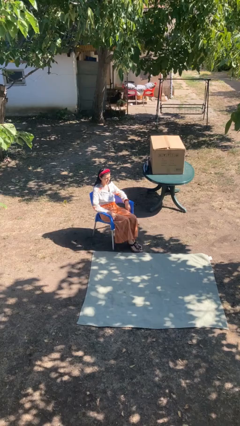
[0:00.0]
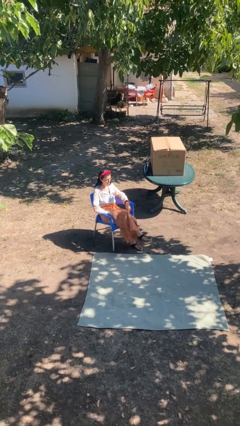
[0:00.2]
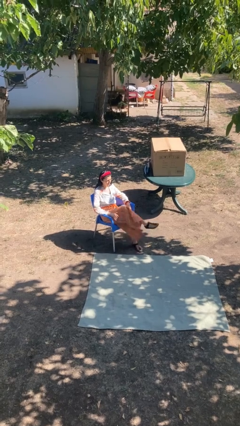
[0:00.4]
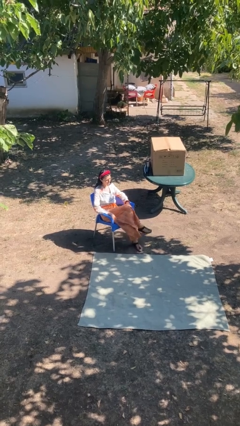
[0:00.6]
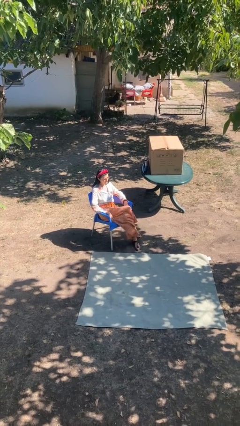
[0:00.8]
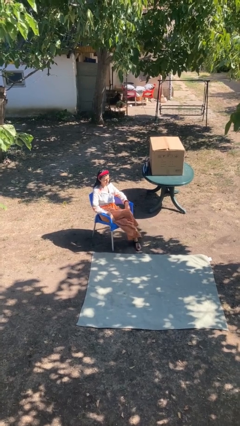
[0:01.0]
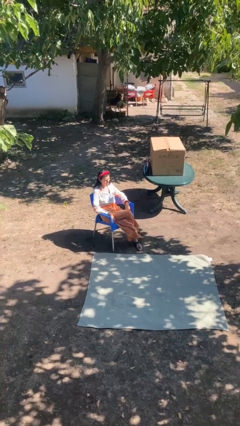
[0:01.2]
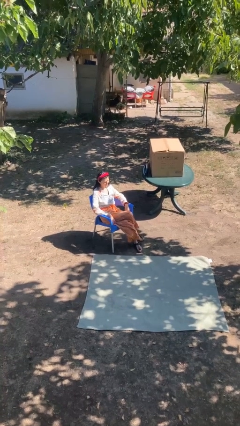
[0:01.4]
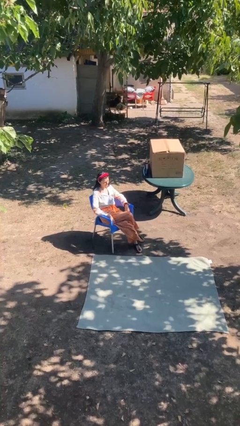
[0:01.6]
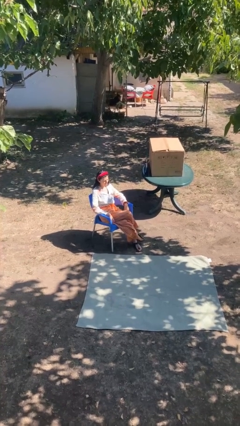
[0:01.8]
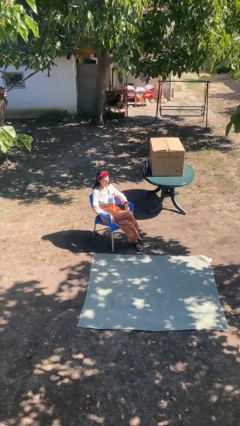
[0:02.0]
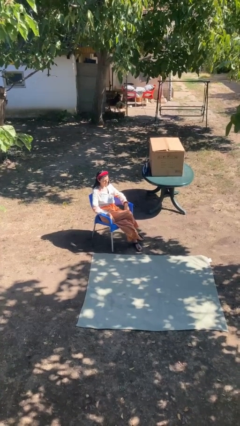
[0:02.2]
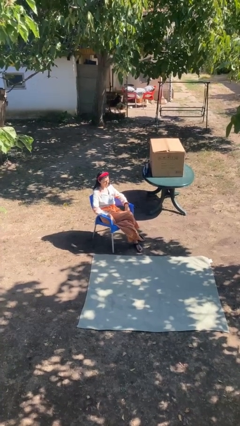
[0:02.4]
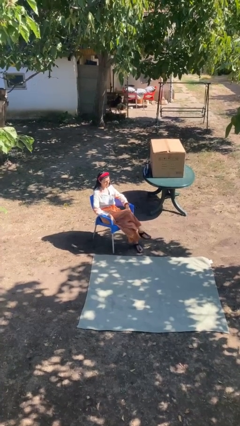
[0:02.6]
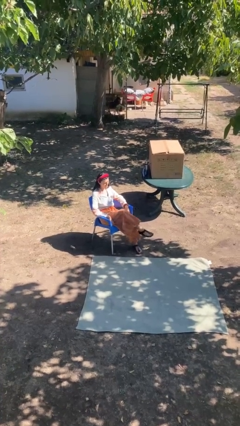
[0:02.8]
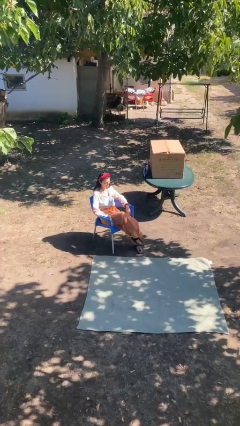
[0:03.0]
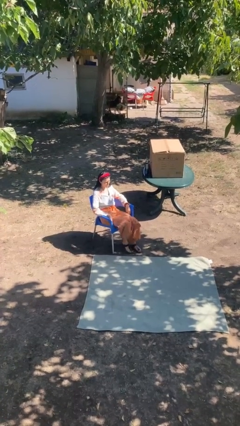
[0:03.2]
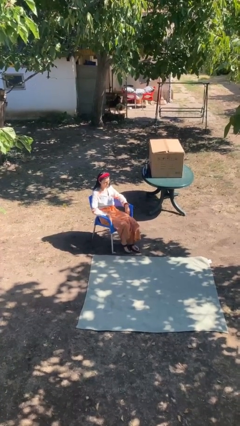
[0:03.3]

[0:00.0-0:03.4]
person crosses legs

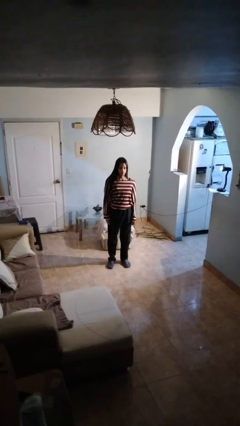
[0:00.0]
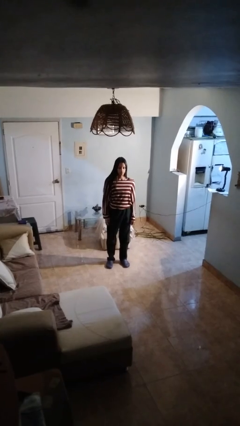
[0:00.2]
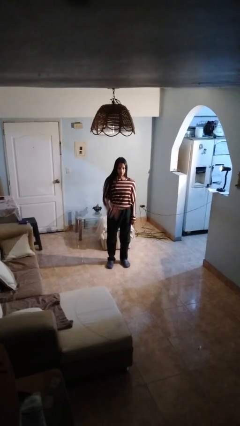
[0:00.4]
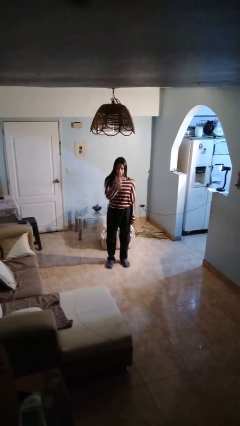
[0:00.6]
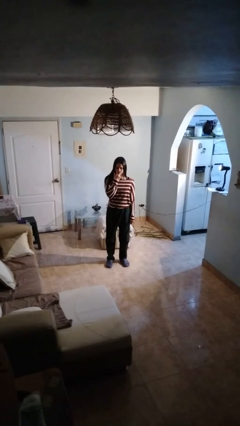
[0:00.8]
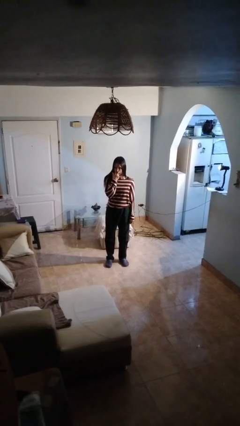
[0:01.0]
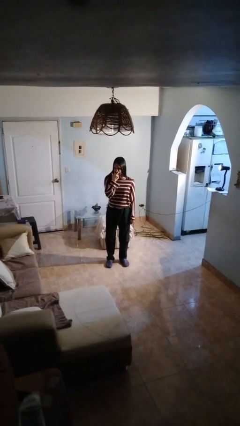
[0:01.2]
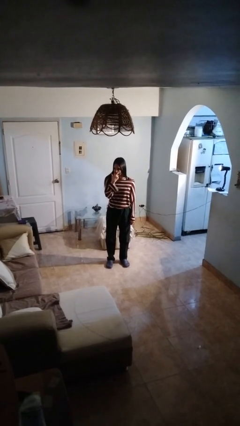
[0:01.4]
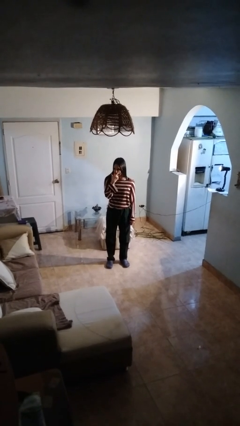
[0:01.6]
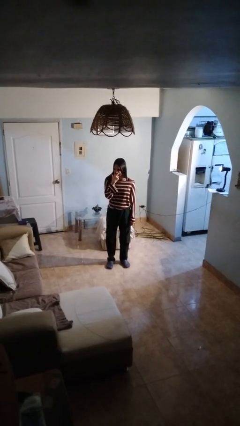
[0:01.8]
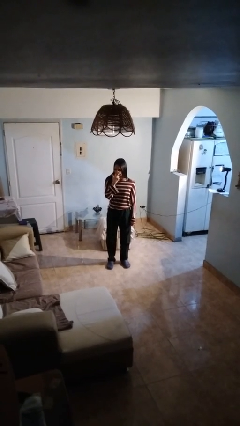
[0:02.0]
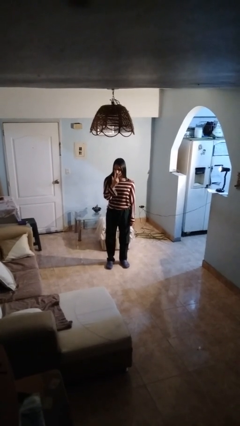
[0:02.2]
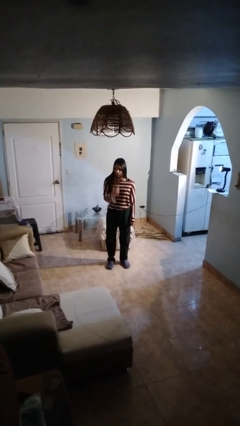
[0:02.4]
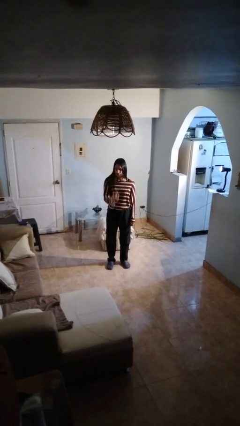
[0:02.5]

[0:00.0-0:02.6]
person gestures watch closely

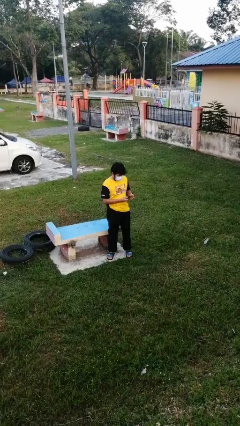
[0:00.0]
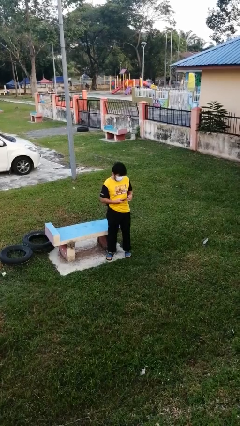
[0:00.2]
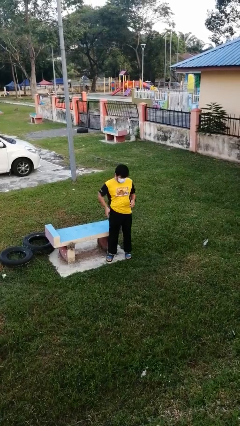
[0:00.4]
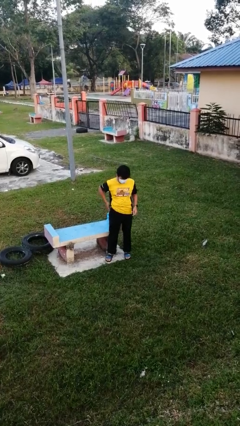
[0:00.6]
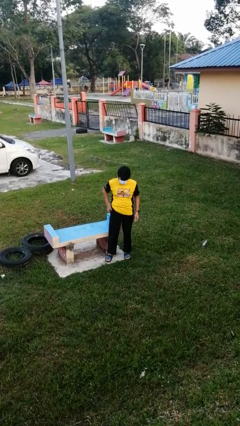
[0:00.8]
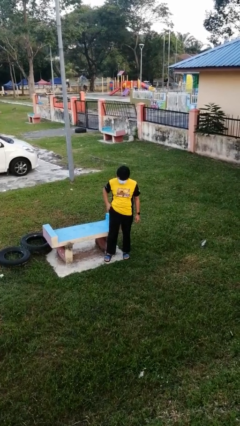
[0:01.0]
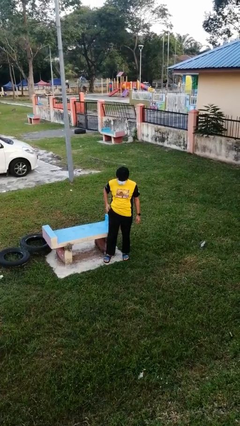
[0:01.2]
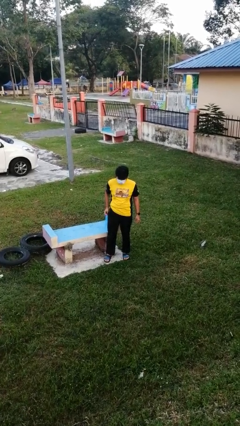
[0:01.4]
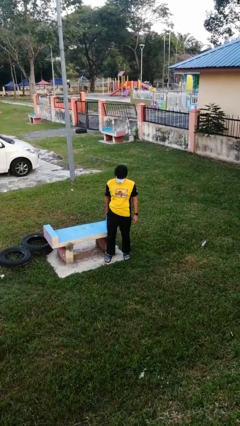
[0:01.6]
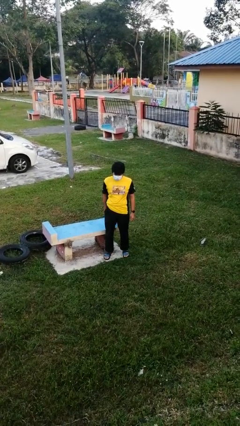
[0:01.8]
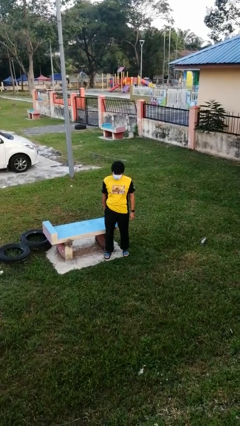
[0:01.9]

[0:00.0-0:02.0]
person puts phone into pocket

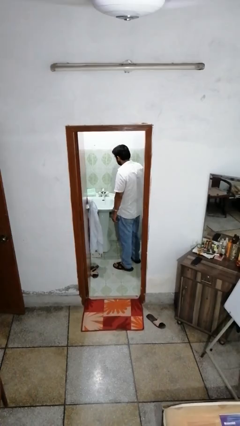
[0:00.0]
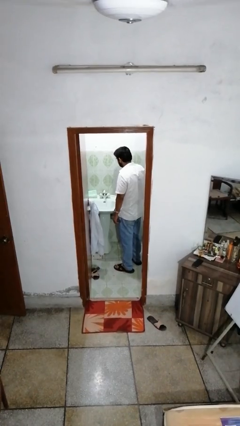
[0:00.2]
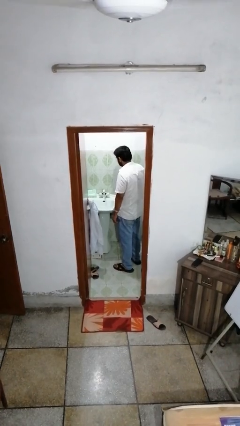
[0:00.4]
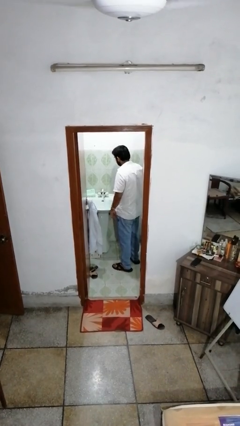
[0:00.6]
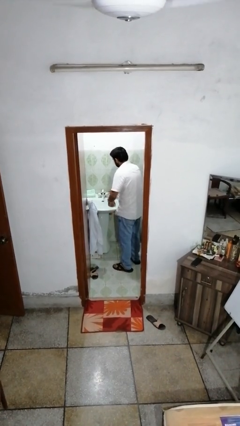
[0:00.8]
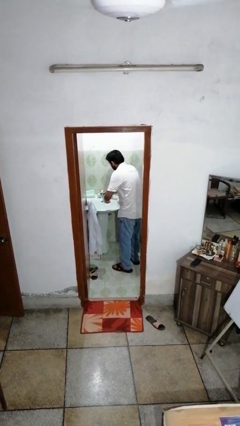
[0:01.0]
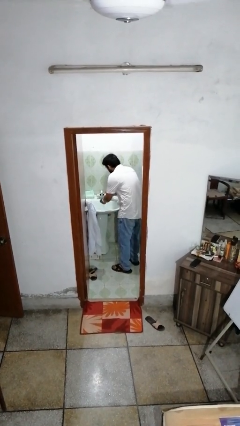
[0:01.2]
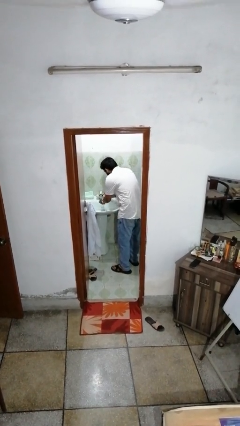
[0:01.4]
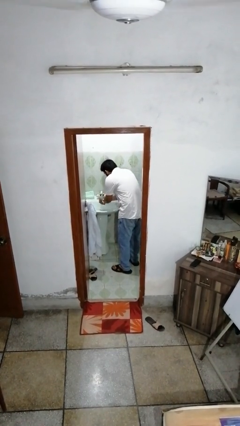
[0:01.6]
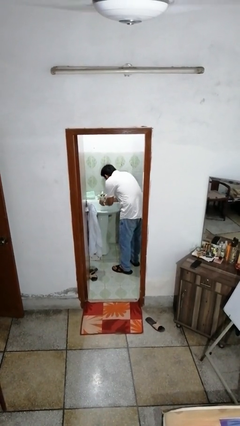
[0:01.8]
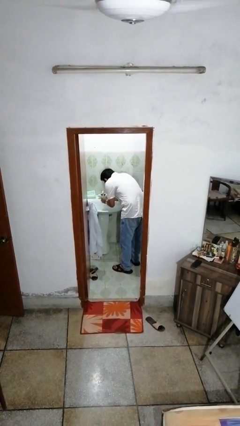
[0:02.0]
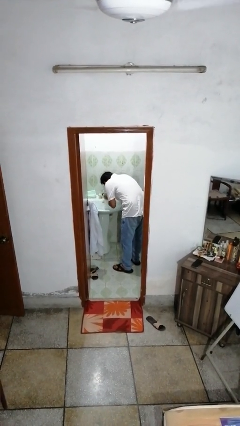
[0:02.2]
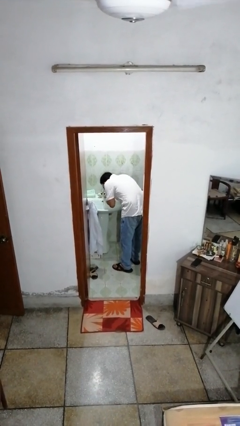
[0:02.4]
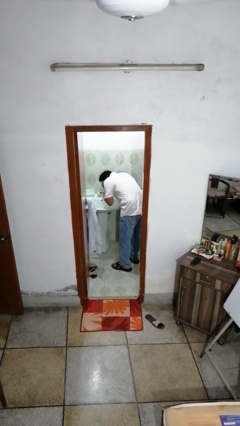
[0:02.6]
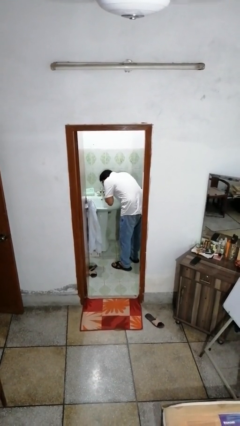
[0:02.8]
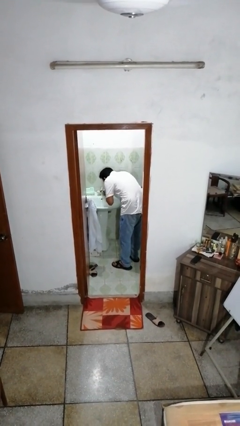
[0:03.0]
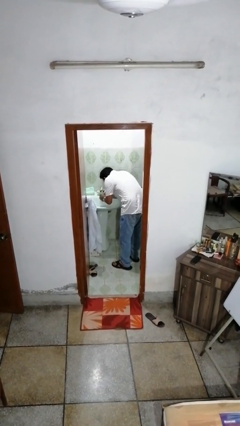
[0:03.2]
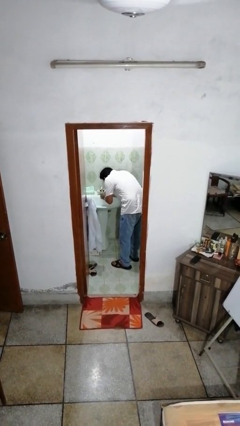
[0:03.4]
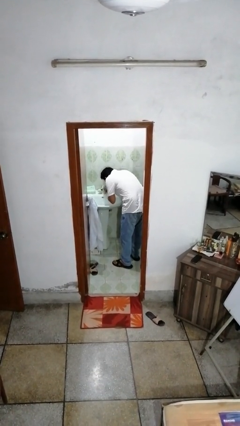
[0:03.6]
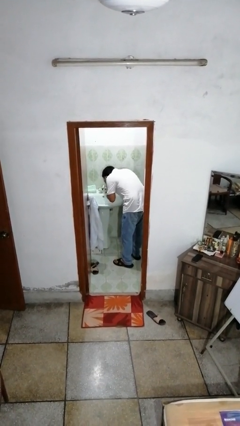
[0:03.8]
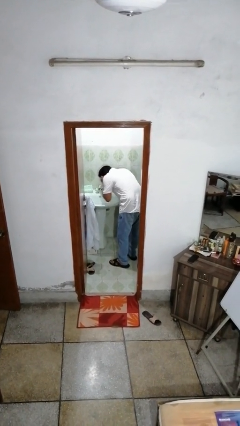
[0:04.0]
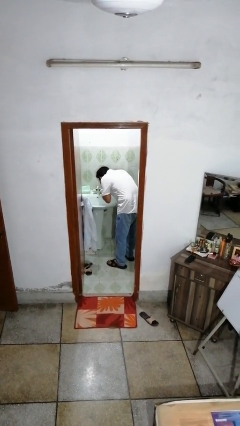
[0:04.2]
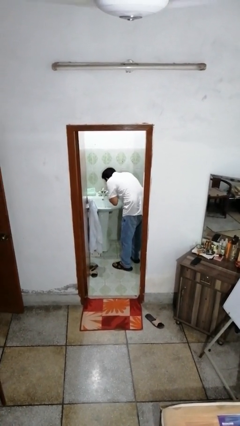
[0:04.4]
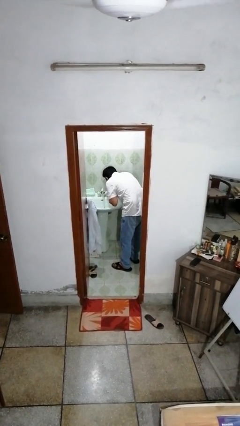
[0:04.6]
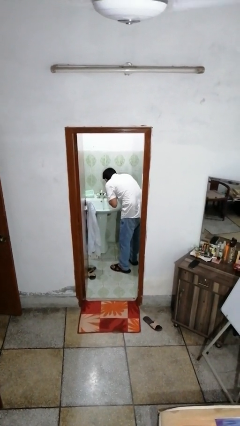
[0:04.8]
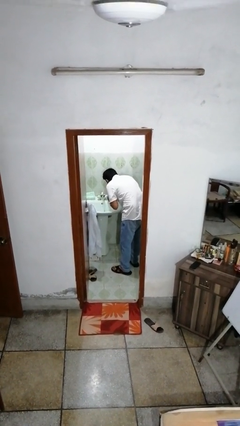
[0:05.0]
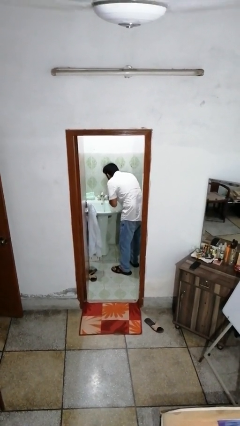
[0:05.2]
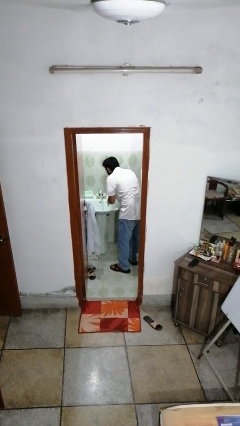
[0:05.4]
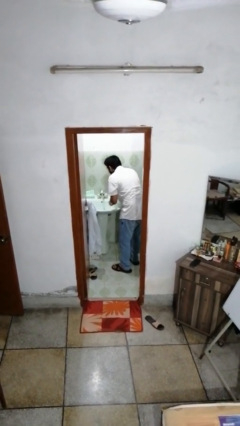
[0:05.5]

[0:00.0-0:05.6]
person washes face

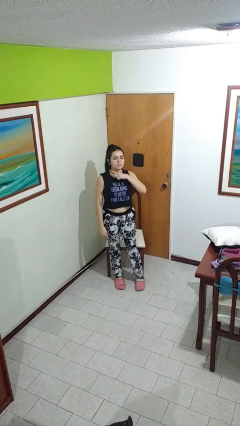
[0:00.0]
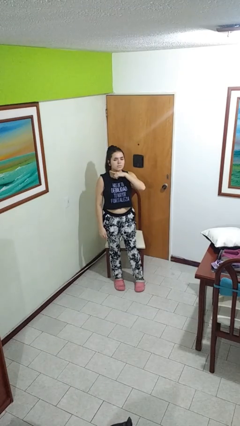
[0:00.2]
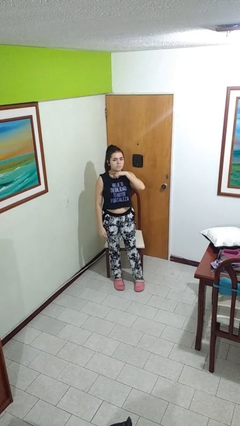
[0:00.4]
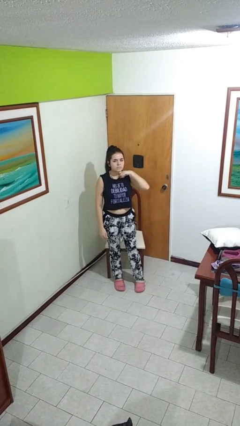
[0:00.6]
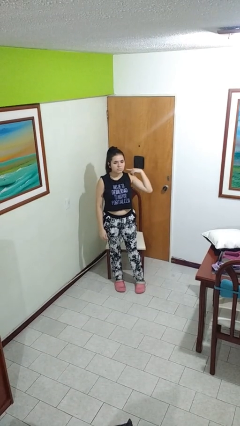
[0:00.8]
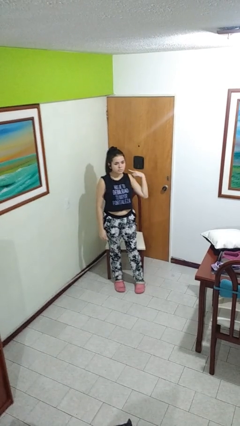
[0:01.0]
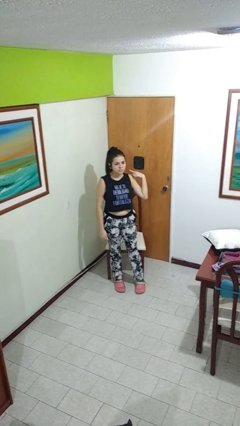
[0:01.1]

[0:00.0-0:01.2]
person gestures cut

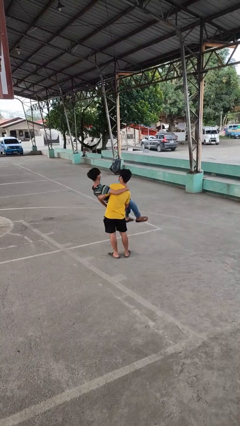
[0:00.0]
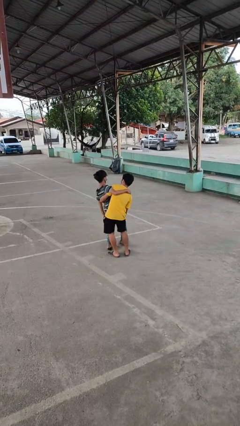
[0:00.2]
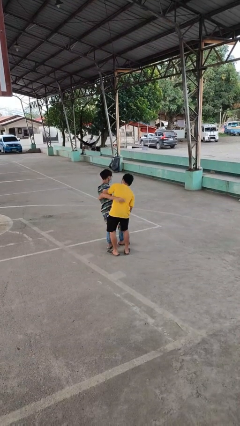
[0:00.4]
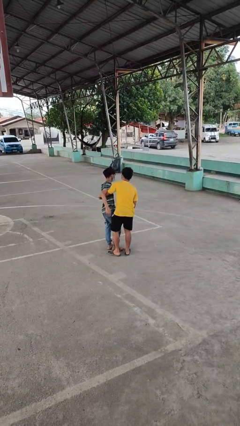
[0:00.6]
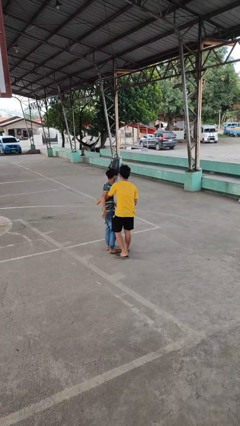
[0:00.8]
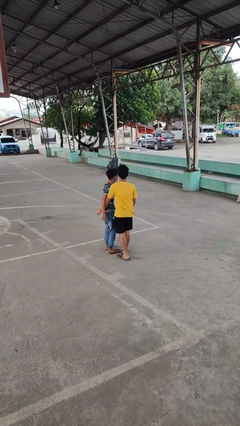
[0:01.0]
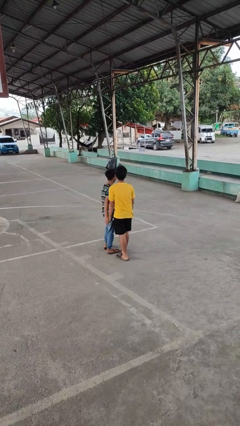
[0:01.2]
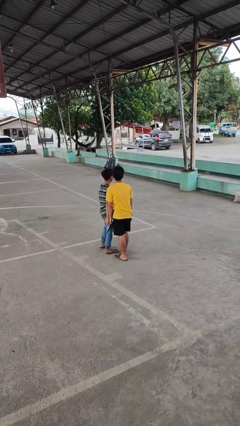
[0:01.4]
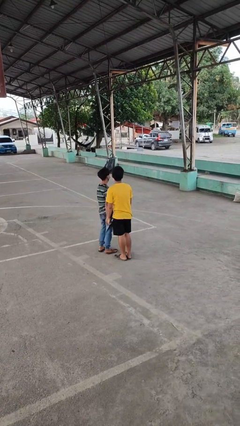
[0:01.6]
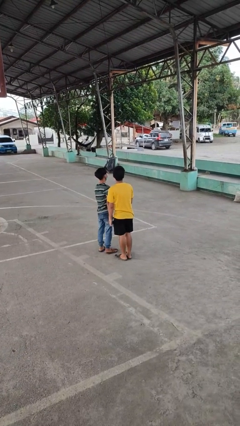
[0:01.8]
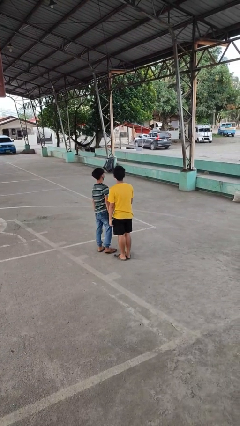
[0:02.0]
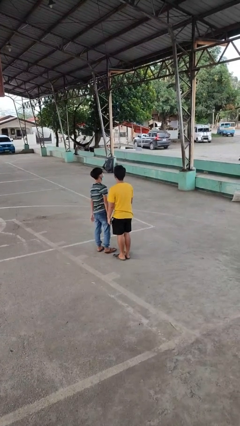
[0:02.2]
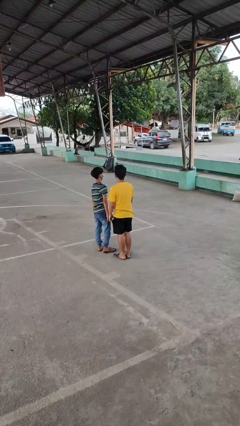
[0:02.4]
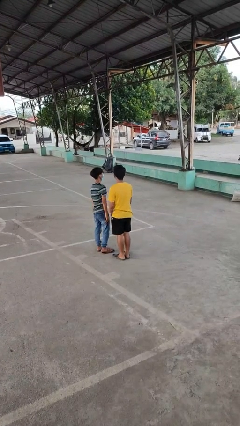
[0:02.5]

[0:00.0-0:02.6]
person puts down person
